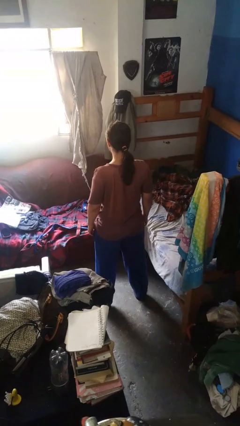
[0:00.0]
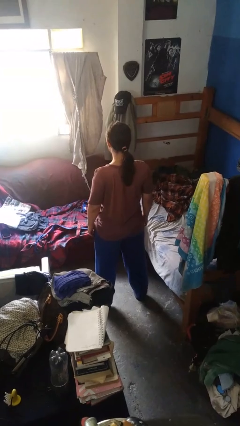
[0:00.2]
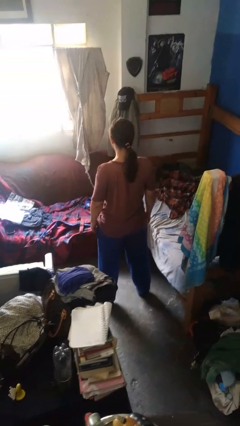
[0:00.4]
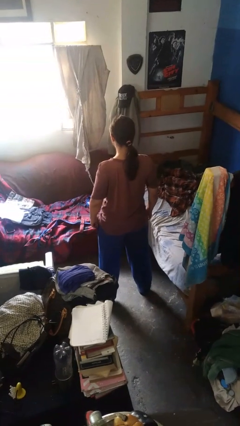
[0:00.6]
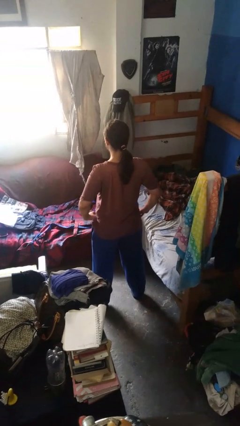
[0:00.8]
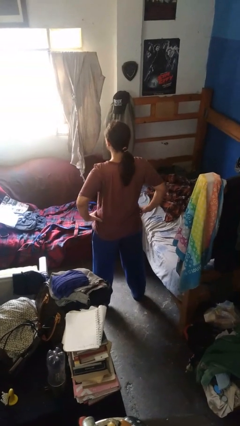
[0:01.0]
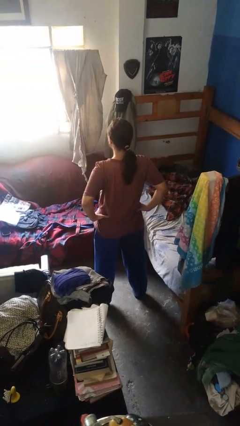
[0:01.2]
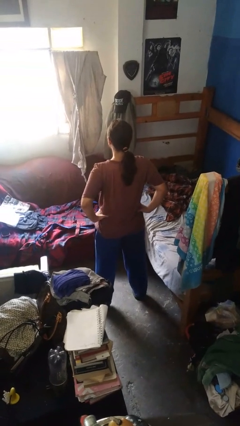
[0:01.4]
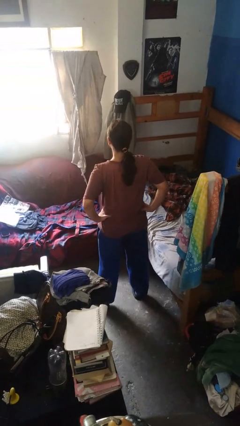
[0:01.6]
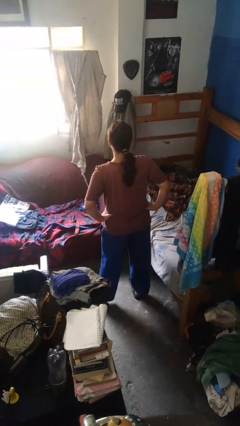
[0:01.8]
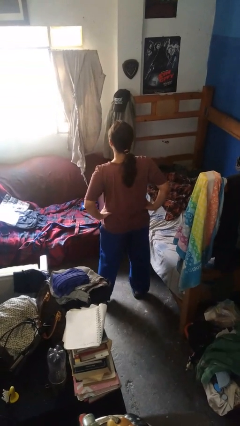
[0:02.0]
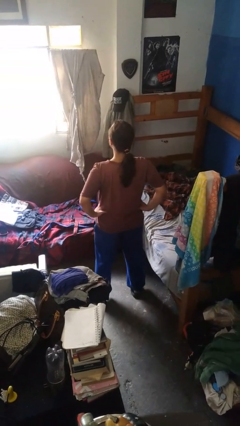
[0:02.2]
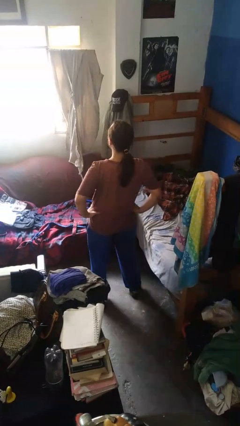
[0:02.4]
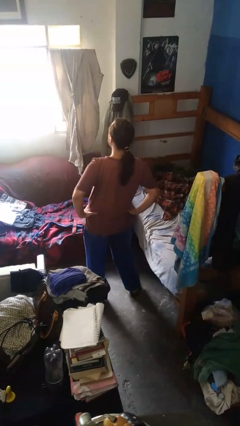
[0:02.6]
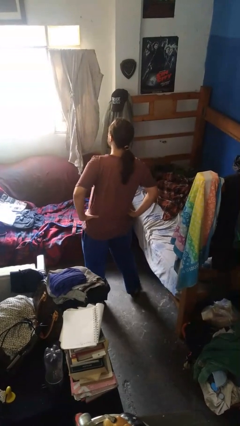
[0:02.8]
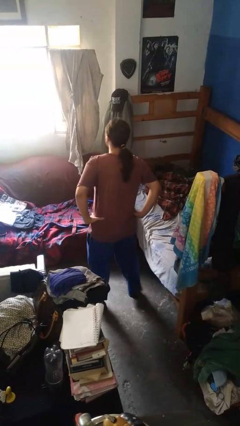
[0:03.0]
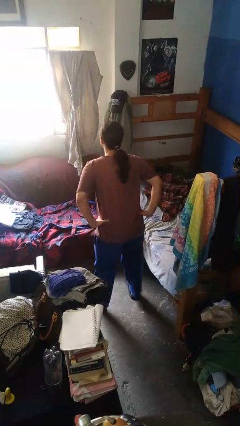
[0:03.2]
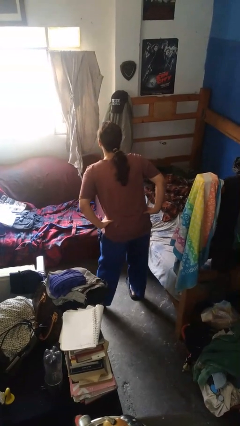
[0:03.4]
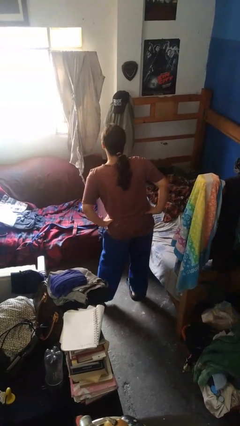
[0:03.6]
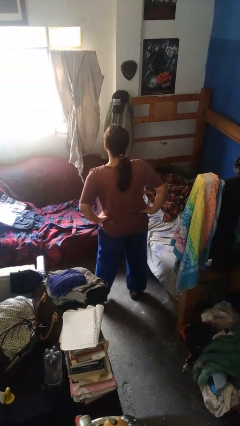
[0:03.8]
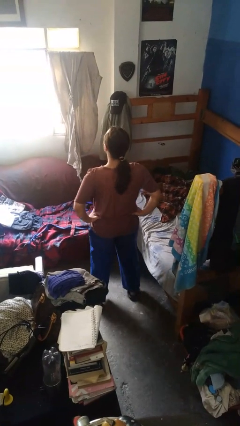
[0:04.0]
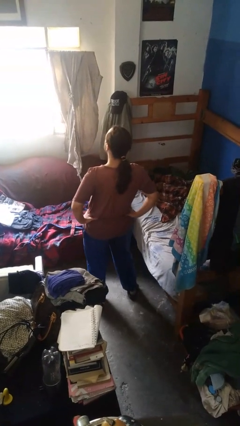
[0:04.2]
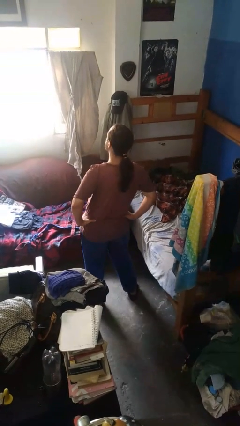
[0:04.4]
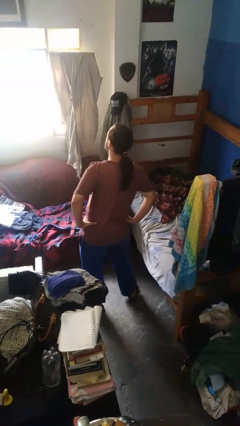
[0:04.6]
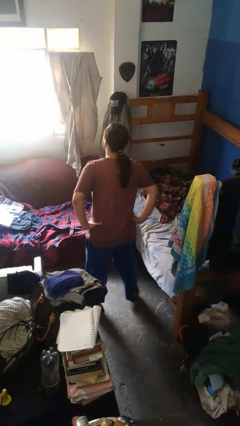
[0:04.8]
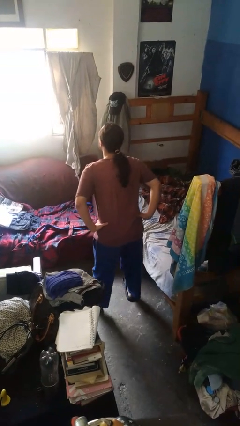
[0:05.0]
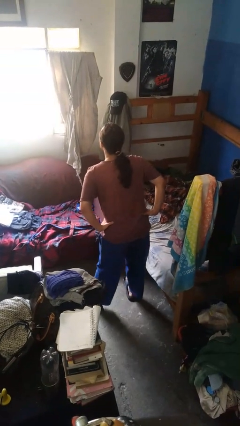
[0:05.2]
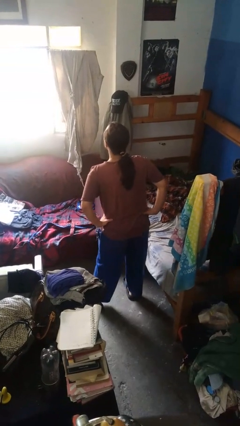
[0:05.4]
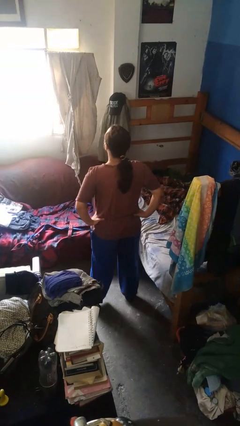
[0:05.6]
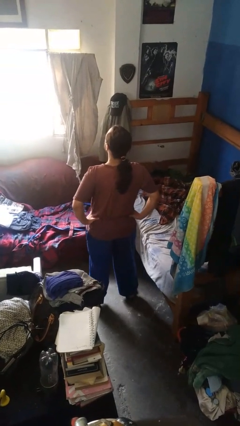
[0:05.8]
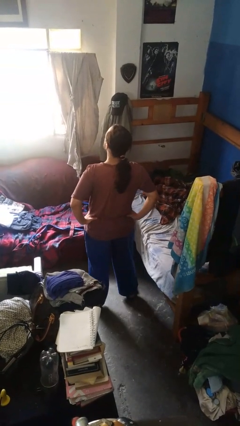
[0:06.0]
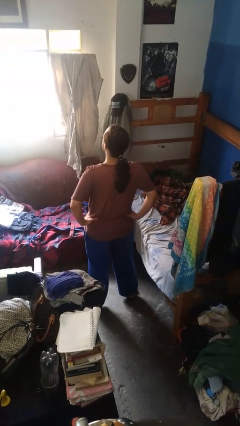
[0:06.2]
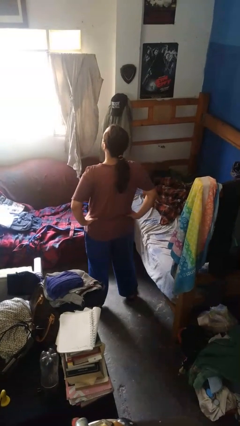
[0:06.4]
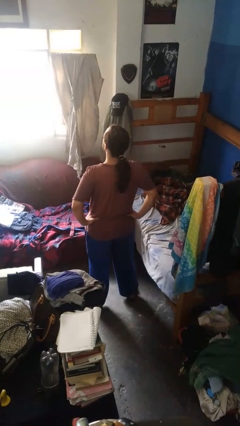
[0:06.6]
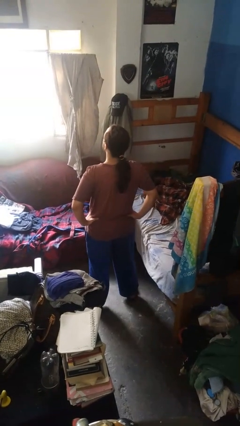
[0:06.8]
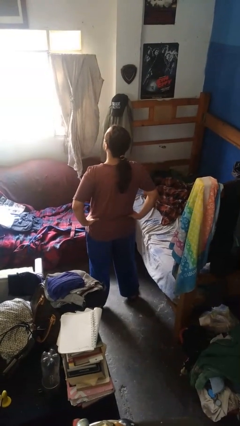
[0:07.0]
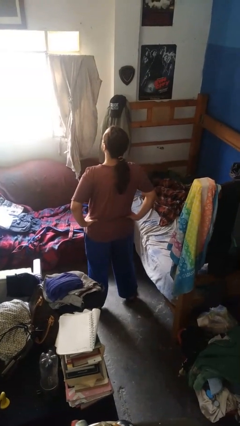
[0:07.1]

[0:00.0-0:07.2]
person wiggles hips

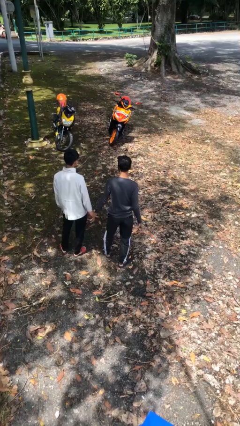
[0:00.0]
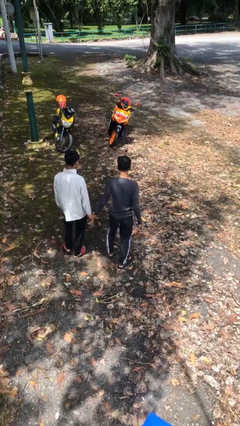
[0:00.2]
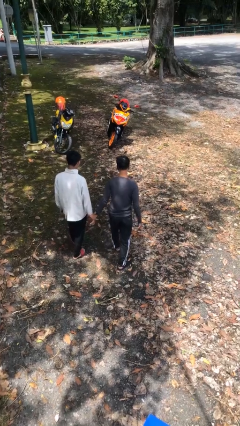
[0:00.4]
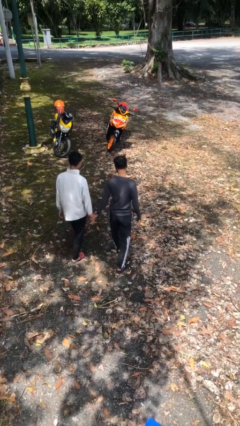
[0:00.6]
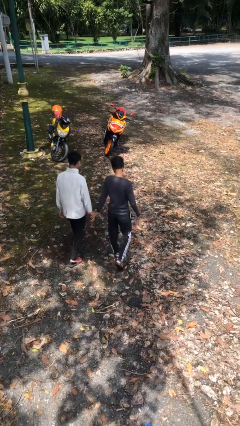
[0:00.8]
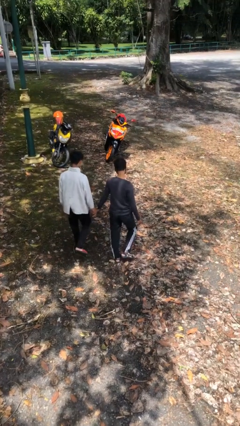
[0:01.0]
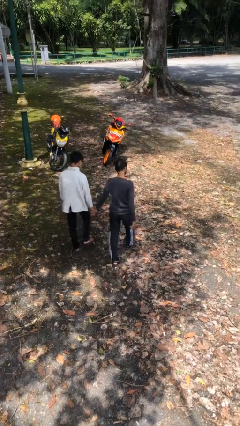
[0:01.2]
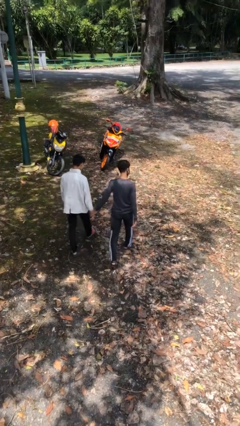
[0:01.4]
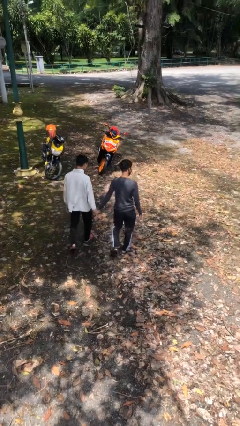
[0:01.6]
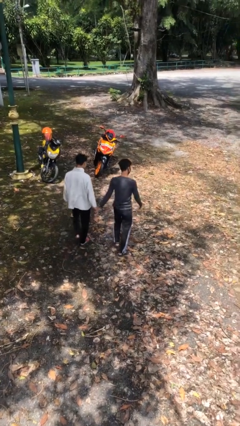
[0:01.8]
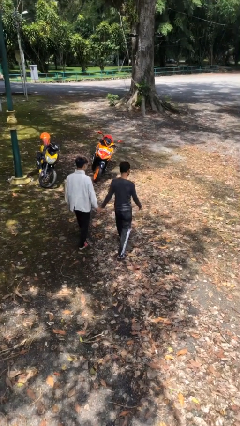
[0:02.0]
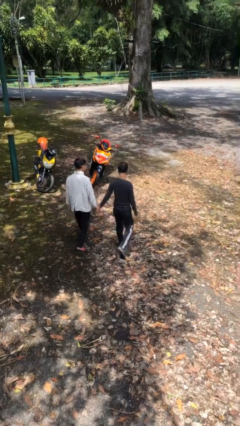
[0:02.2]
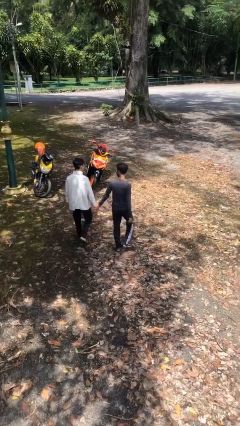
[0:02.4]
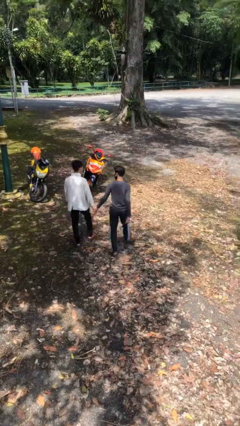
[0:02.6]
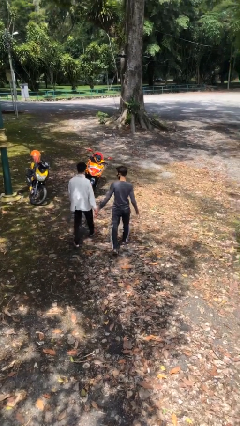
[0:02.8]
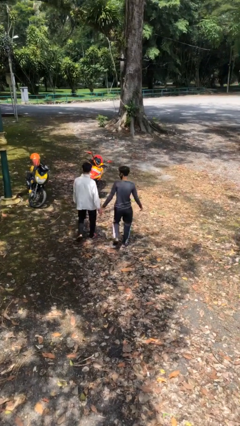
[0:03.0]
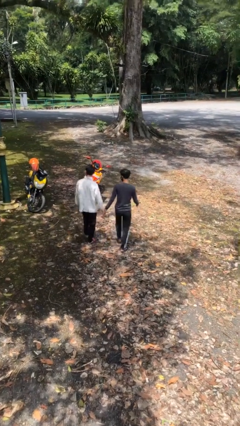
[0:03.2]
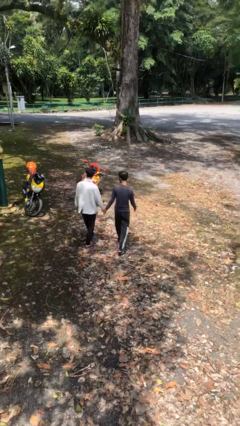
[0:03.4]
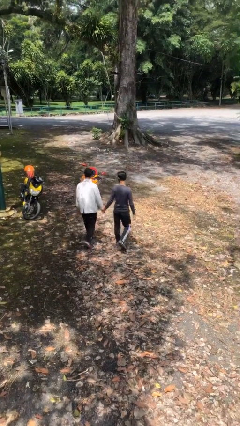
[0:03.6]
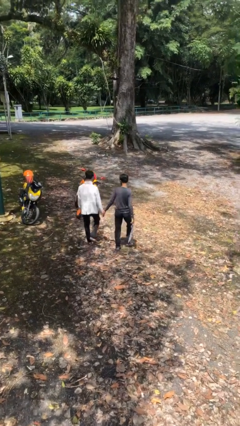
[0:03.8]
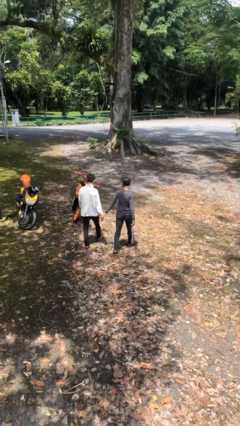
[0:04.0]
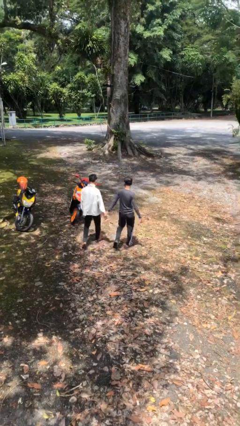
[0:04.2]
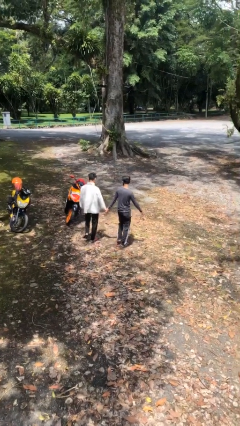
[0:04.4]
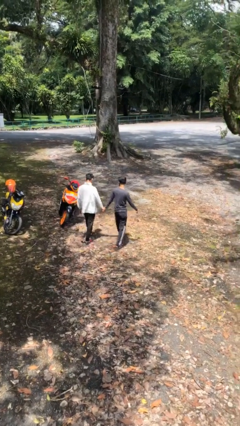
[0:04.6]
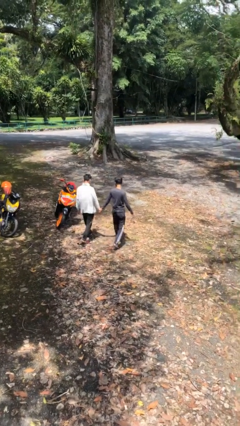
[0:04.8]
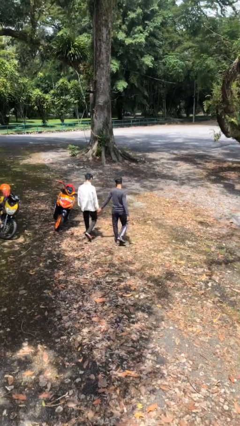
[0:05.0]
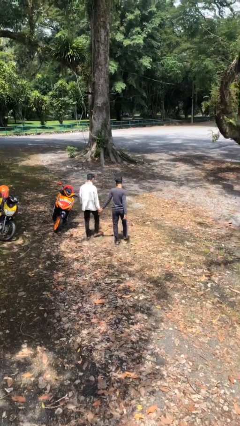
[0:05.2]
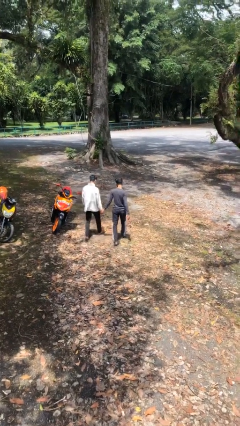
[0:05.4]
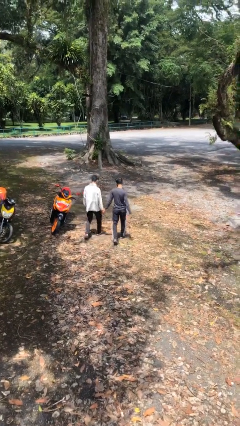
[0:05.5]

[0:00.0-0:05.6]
person holds hand

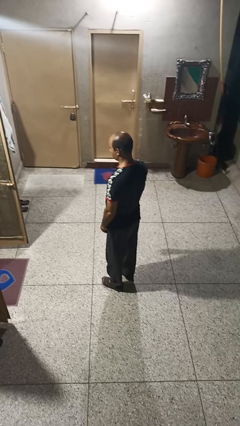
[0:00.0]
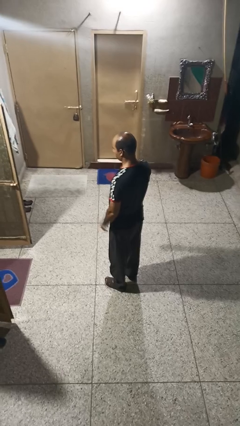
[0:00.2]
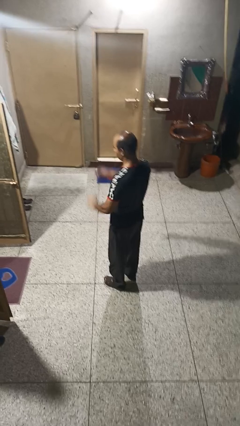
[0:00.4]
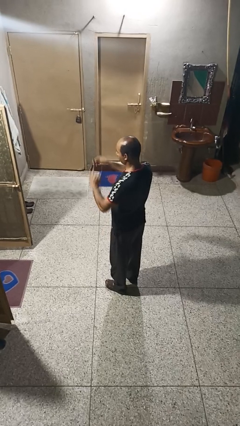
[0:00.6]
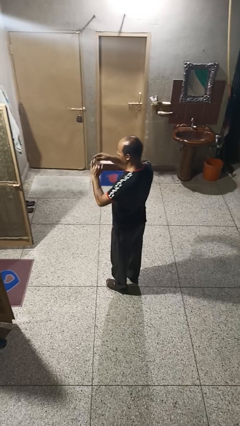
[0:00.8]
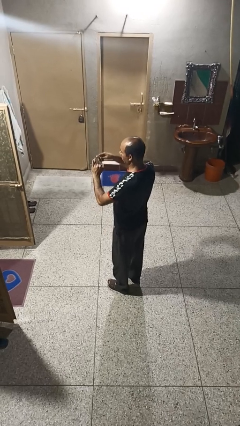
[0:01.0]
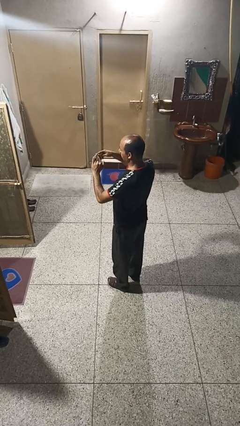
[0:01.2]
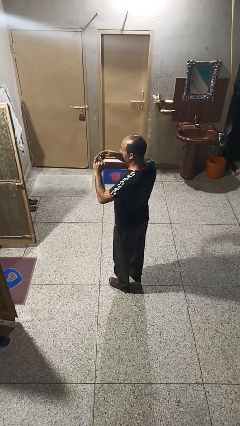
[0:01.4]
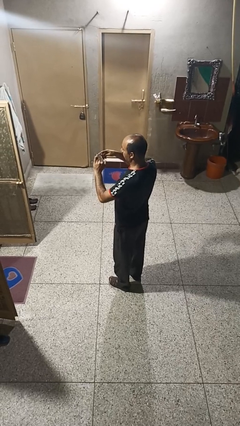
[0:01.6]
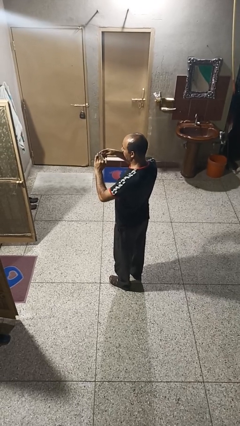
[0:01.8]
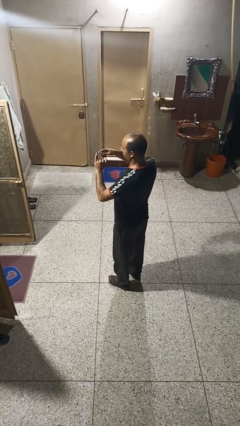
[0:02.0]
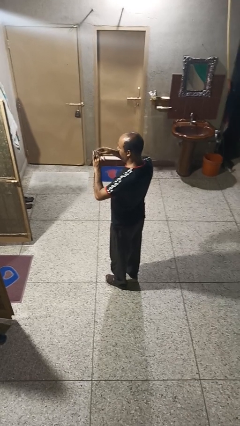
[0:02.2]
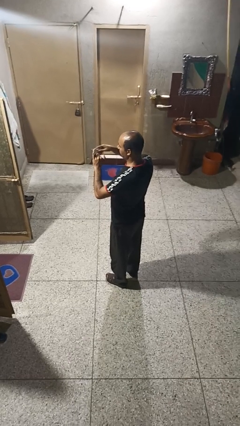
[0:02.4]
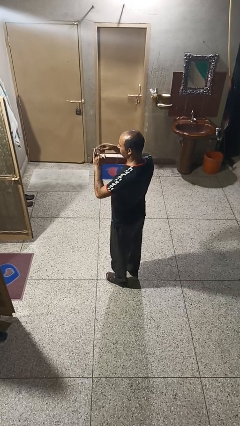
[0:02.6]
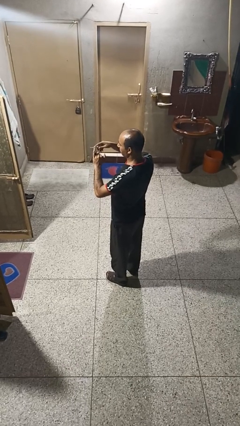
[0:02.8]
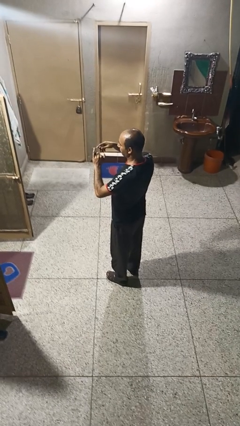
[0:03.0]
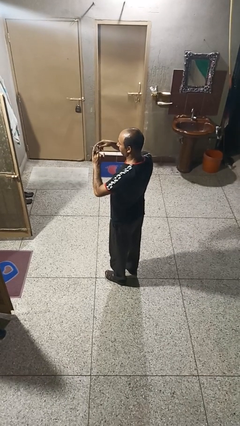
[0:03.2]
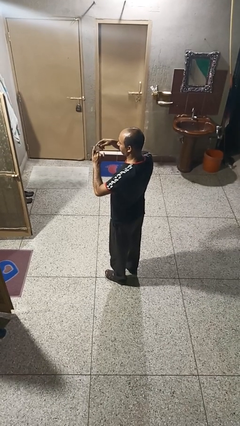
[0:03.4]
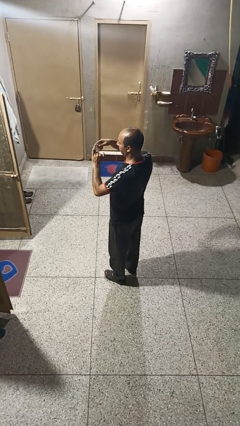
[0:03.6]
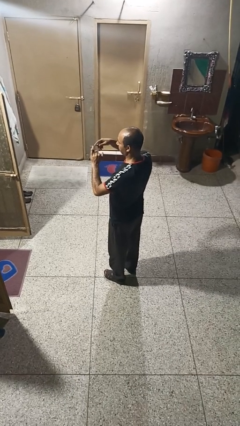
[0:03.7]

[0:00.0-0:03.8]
person files fingernails

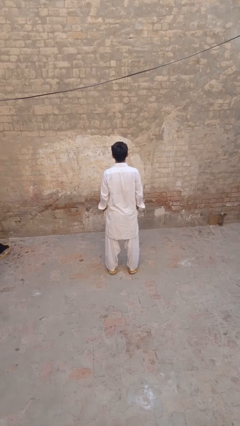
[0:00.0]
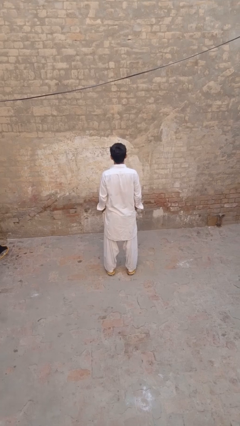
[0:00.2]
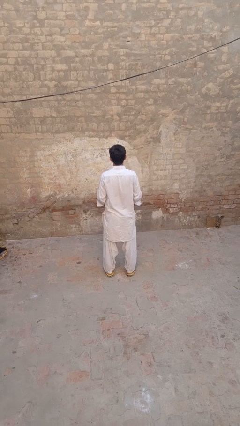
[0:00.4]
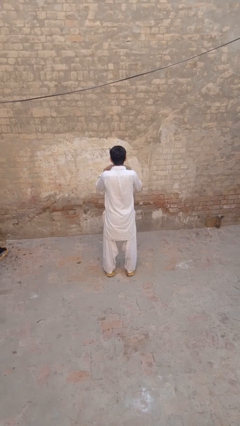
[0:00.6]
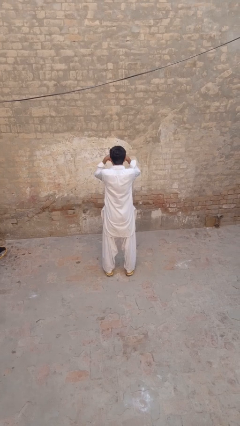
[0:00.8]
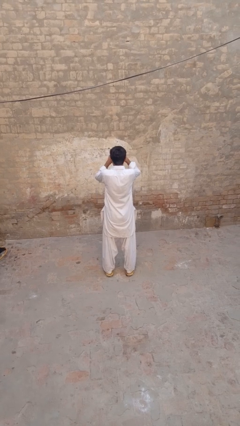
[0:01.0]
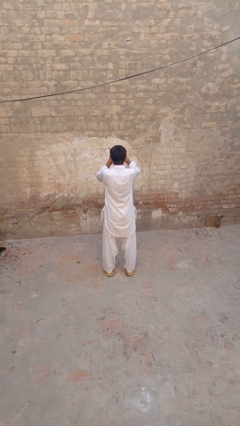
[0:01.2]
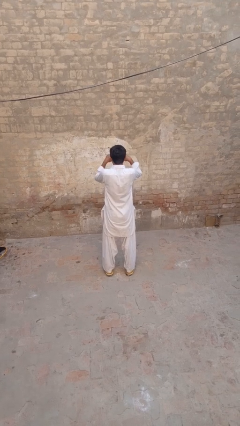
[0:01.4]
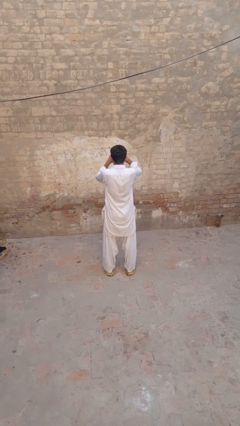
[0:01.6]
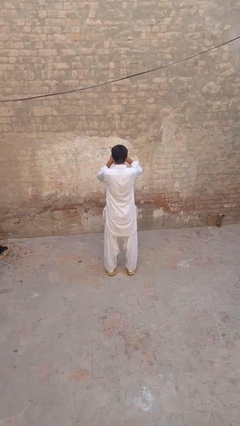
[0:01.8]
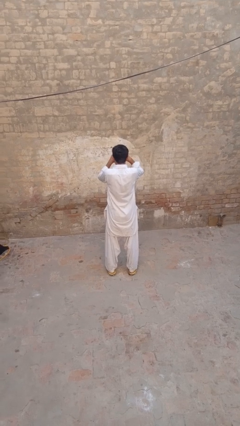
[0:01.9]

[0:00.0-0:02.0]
person shades eyes
